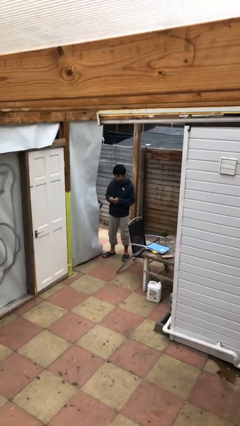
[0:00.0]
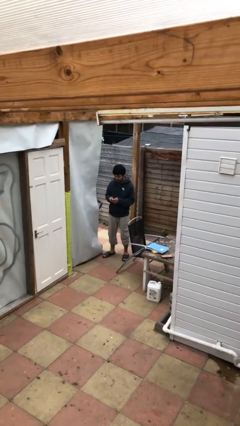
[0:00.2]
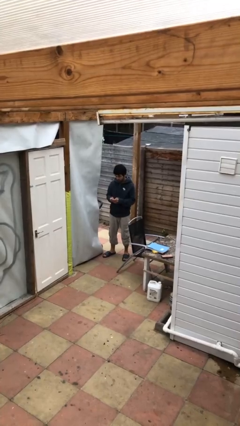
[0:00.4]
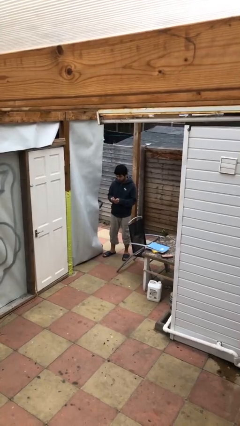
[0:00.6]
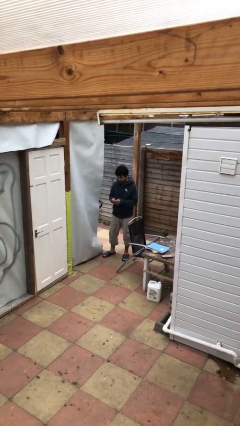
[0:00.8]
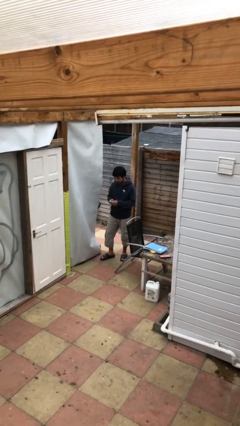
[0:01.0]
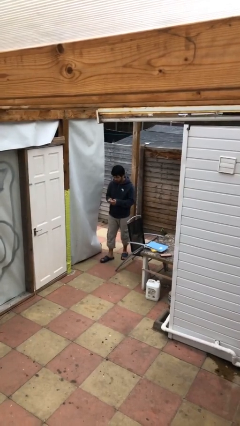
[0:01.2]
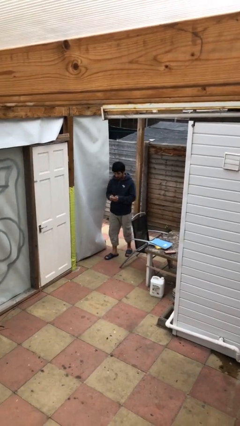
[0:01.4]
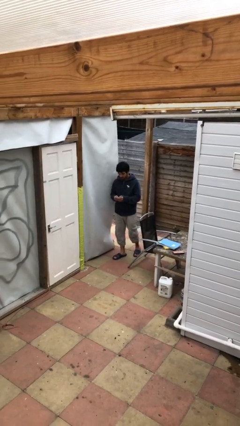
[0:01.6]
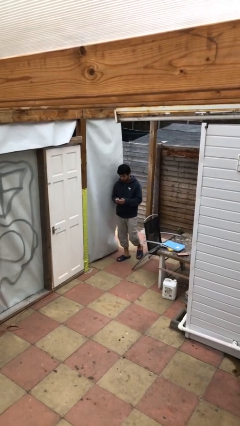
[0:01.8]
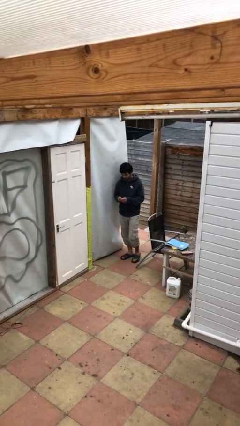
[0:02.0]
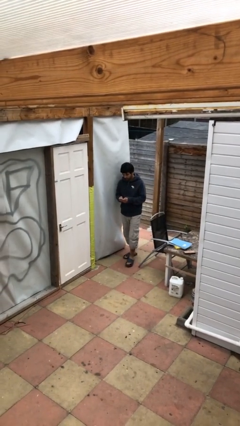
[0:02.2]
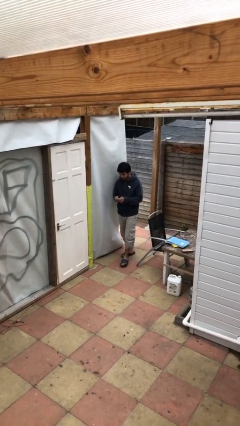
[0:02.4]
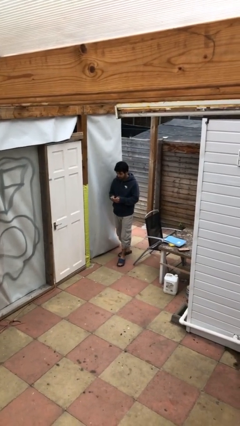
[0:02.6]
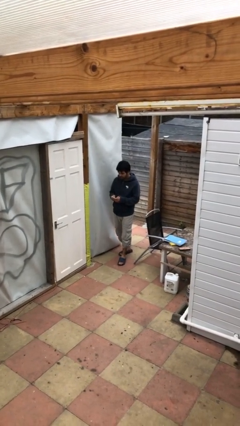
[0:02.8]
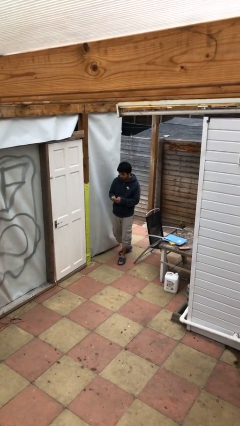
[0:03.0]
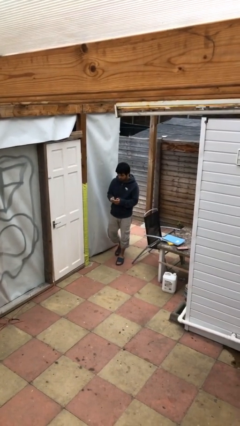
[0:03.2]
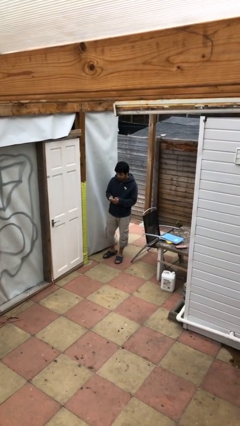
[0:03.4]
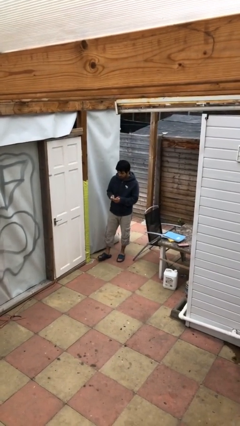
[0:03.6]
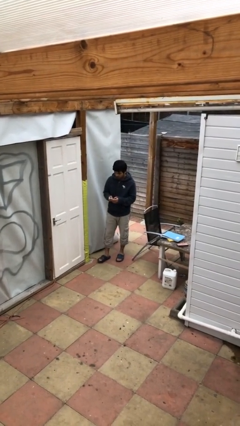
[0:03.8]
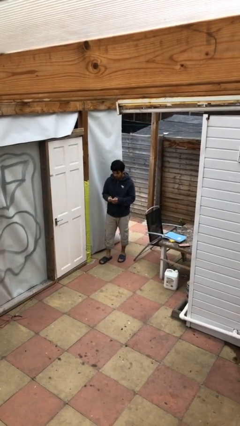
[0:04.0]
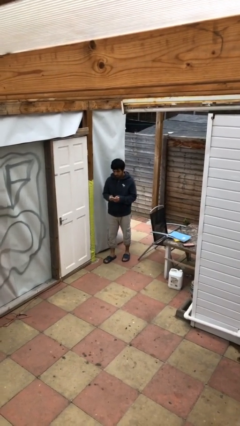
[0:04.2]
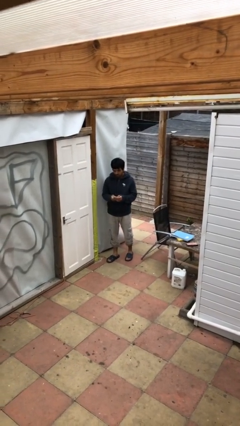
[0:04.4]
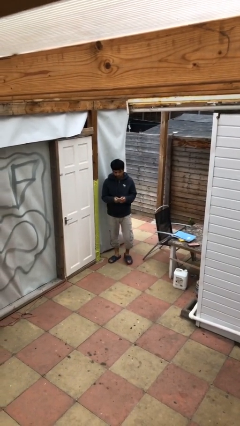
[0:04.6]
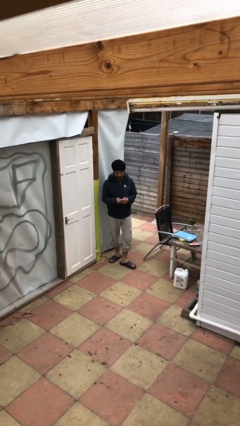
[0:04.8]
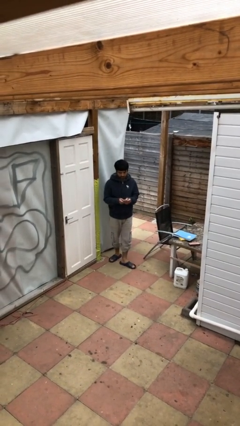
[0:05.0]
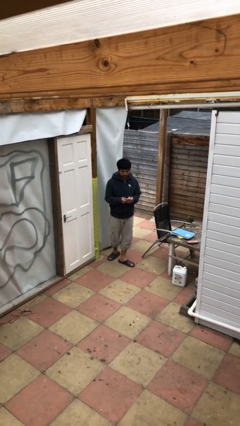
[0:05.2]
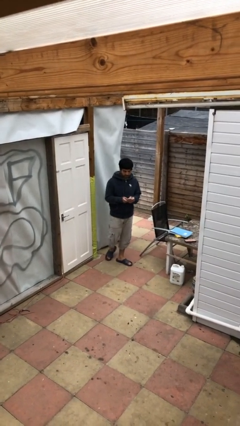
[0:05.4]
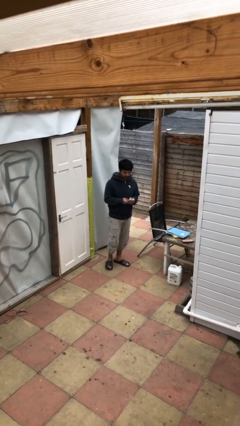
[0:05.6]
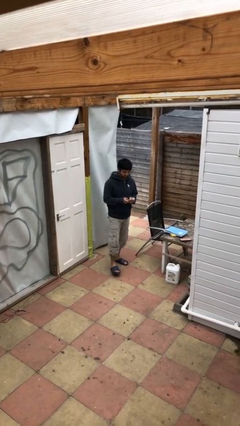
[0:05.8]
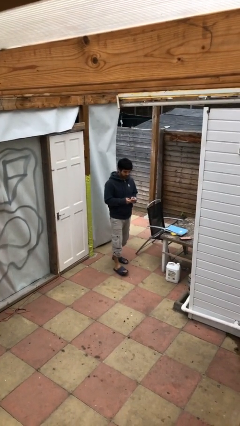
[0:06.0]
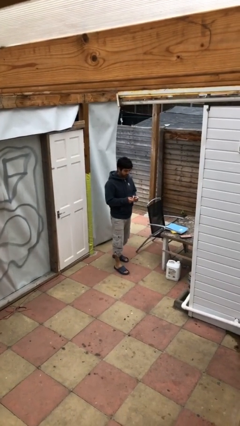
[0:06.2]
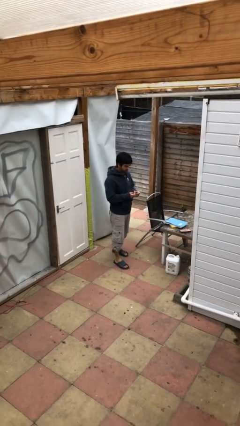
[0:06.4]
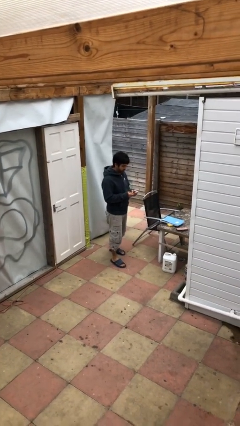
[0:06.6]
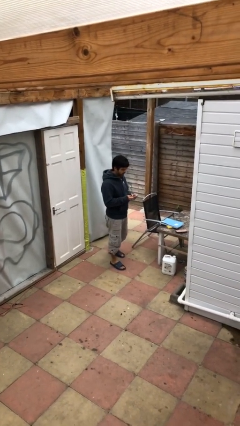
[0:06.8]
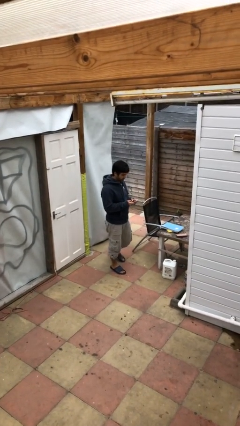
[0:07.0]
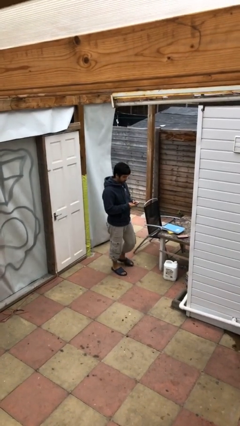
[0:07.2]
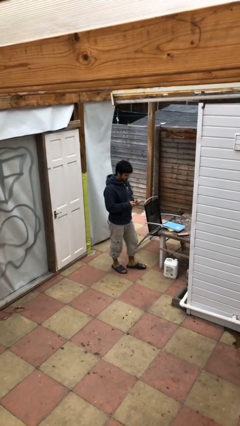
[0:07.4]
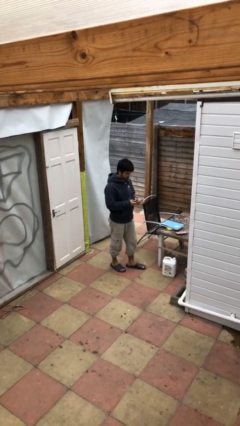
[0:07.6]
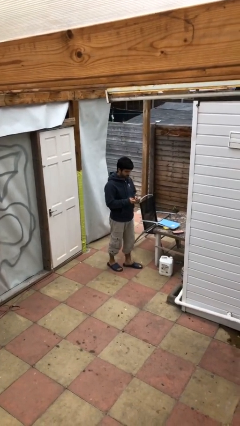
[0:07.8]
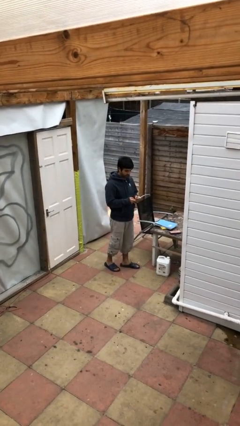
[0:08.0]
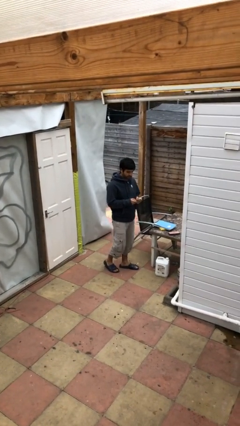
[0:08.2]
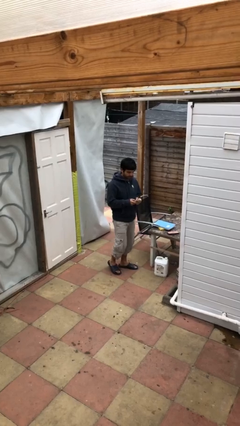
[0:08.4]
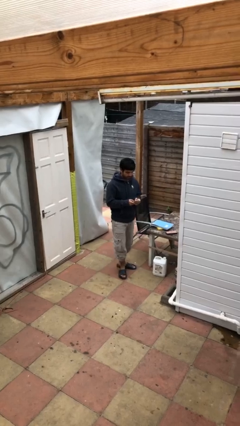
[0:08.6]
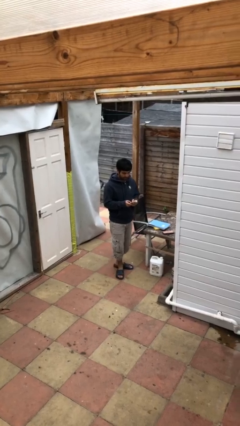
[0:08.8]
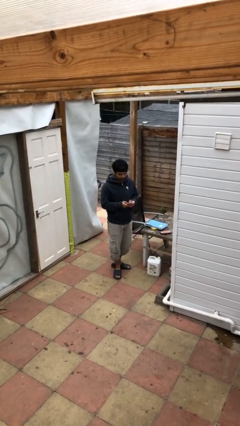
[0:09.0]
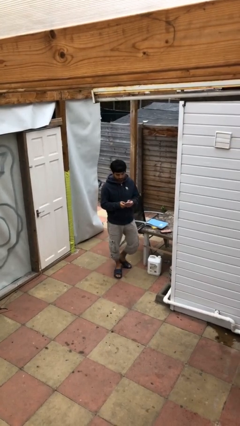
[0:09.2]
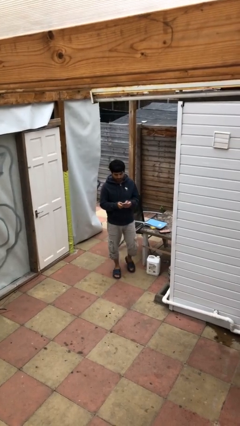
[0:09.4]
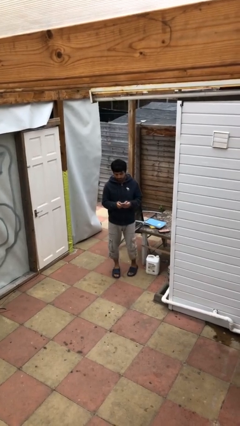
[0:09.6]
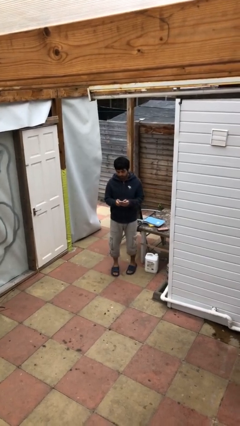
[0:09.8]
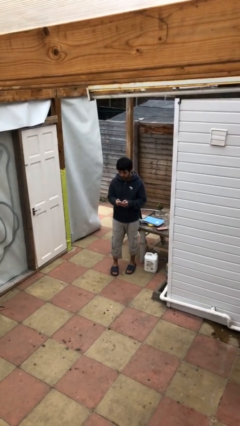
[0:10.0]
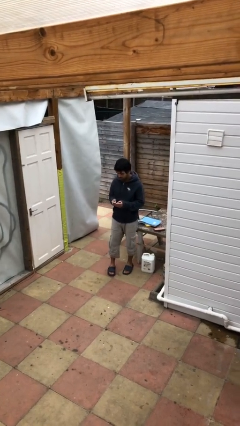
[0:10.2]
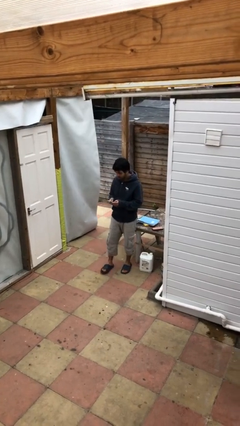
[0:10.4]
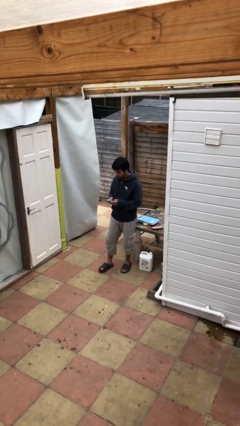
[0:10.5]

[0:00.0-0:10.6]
person texts on phone

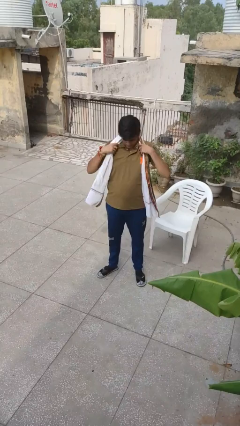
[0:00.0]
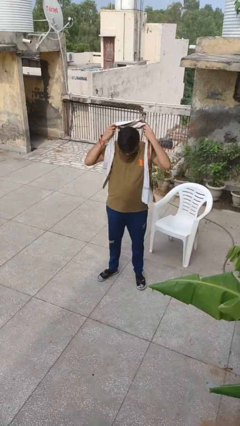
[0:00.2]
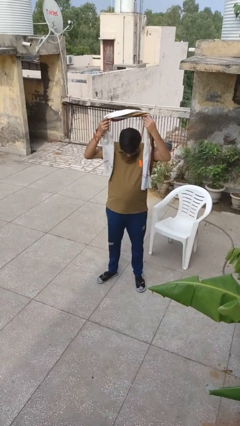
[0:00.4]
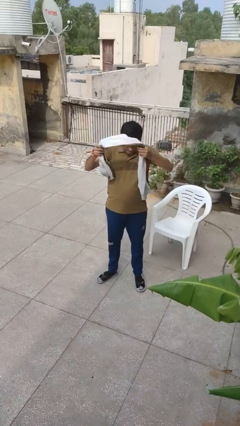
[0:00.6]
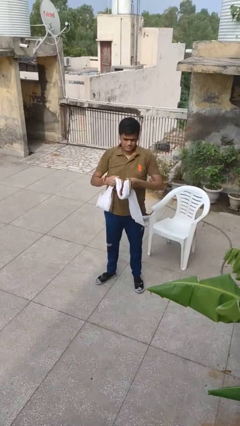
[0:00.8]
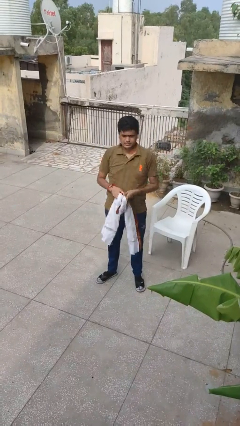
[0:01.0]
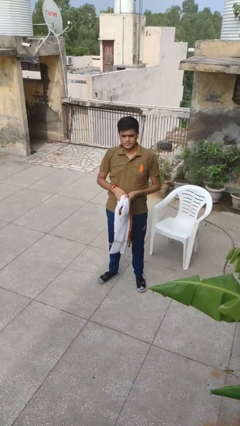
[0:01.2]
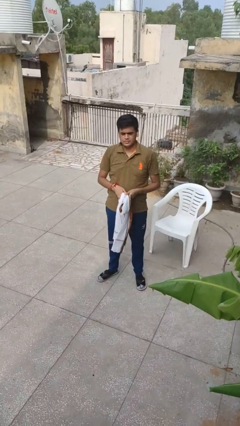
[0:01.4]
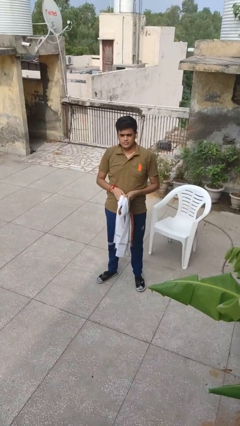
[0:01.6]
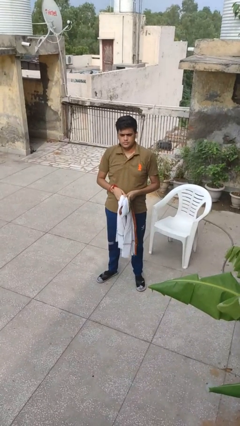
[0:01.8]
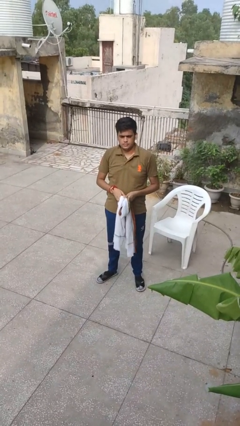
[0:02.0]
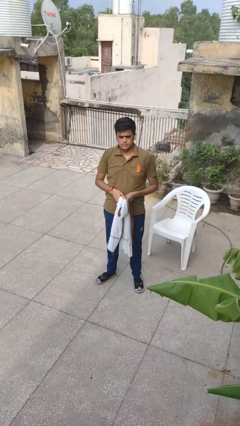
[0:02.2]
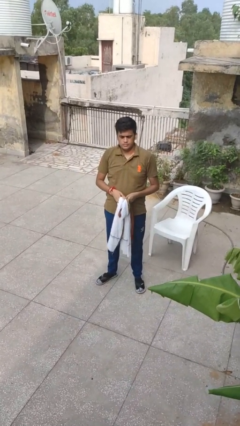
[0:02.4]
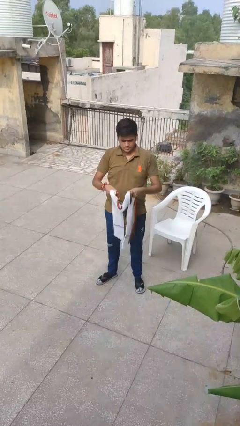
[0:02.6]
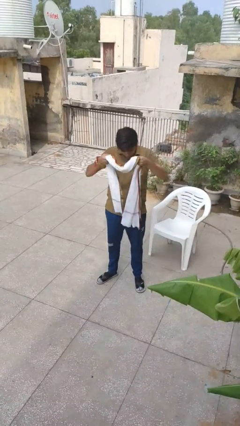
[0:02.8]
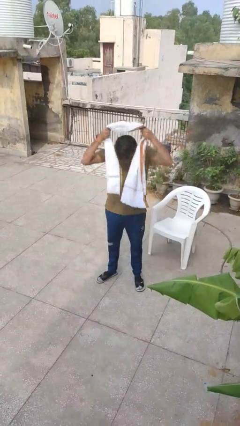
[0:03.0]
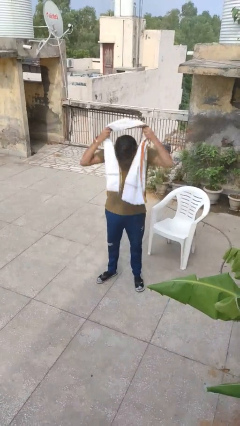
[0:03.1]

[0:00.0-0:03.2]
person takes off scarf

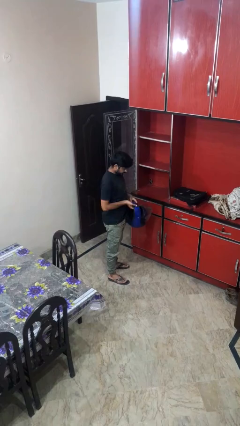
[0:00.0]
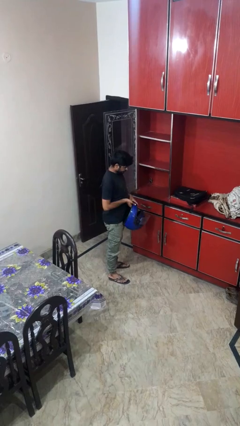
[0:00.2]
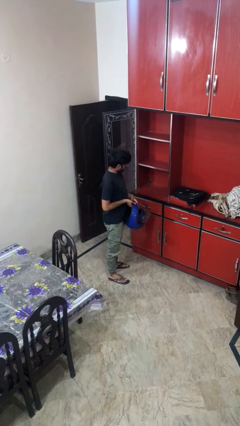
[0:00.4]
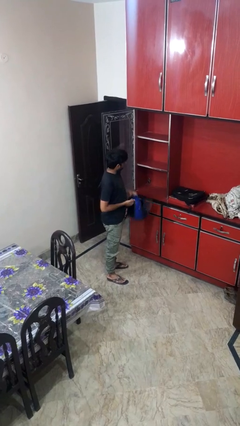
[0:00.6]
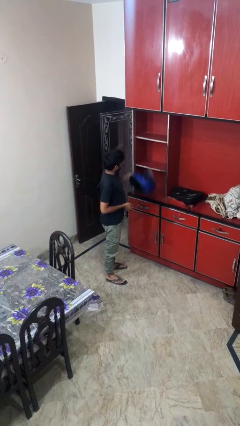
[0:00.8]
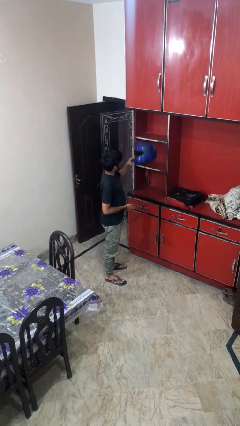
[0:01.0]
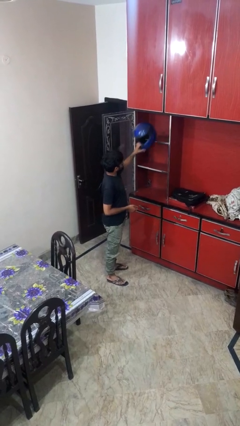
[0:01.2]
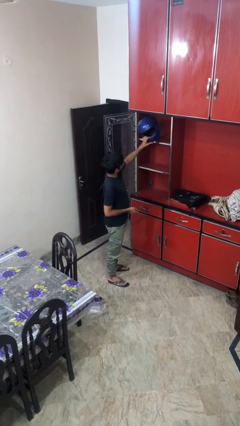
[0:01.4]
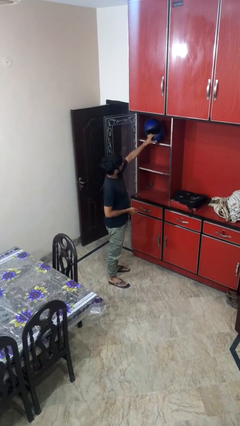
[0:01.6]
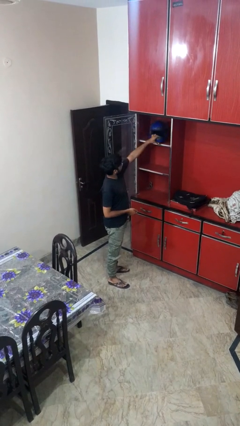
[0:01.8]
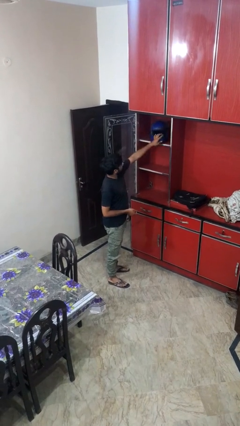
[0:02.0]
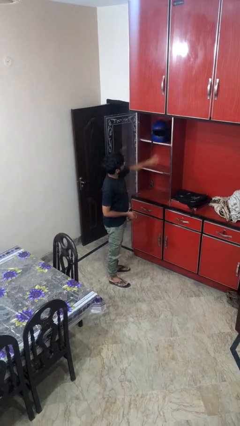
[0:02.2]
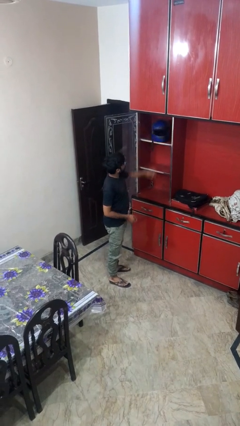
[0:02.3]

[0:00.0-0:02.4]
person puts down object on shelf

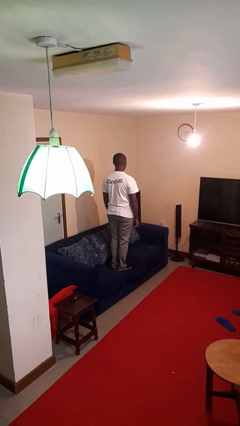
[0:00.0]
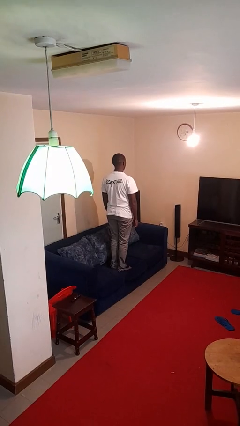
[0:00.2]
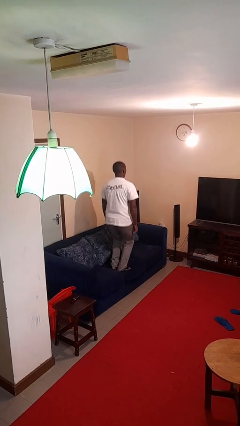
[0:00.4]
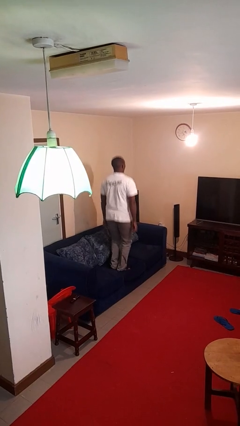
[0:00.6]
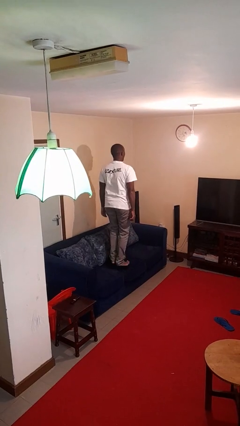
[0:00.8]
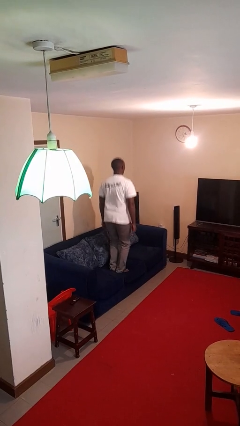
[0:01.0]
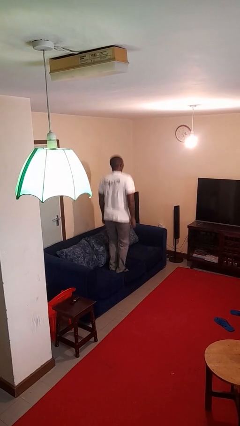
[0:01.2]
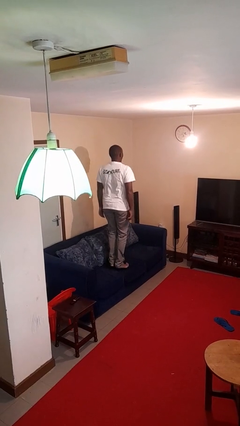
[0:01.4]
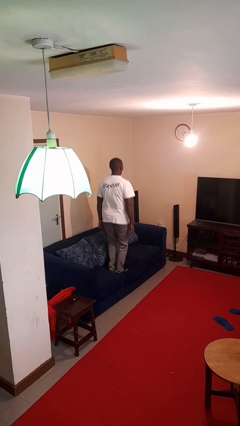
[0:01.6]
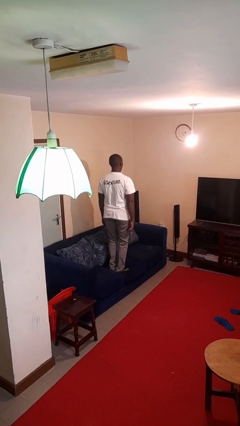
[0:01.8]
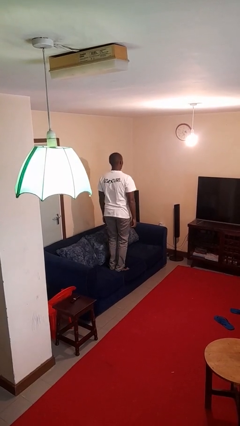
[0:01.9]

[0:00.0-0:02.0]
person jumps on couch
